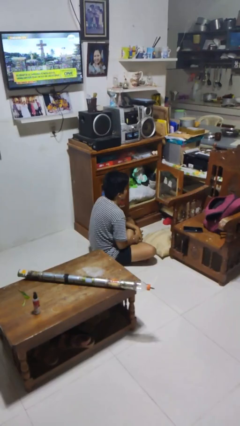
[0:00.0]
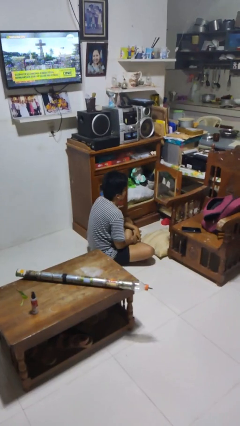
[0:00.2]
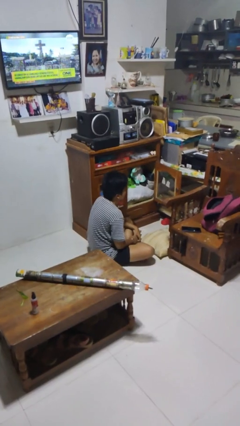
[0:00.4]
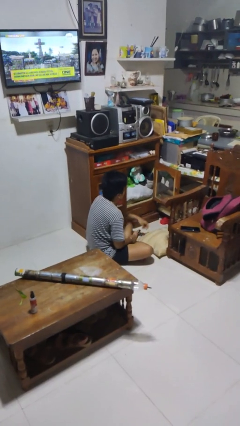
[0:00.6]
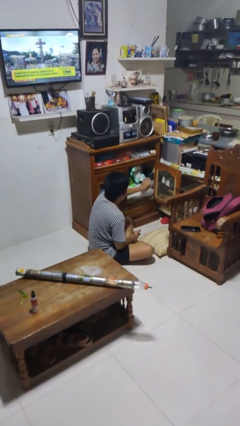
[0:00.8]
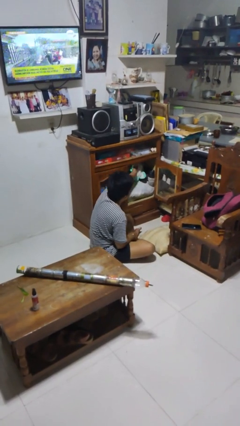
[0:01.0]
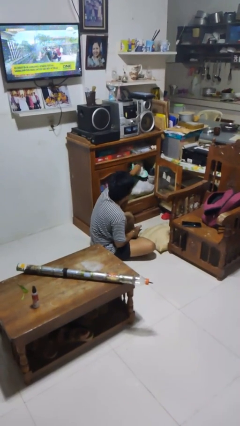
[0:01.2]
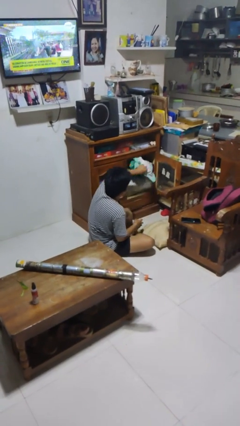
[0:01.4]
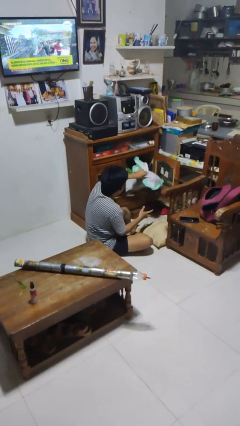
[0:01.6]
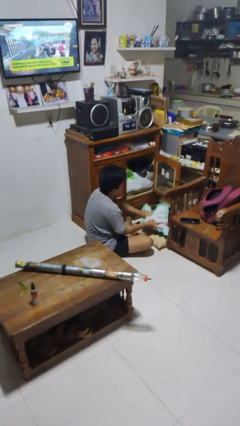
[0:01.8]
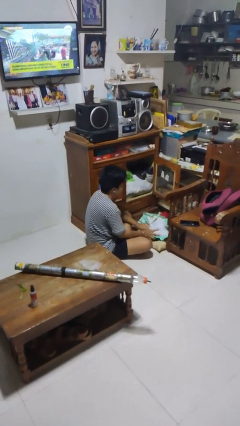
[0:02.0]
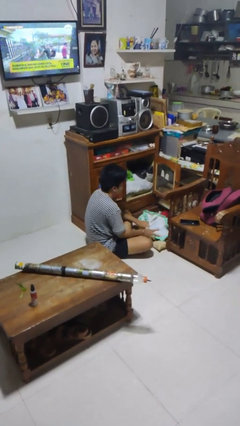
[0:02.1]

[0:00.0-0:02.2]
person puts clothes into dresser

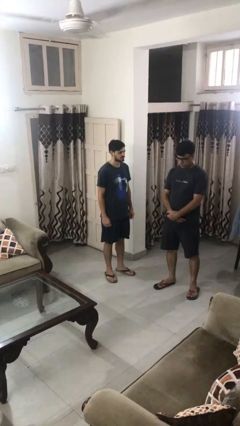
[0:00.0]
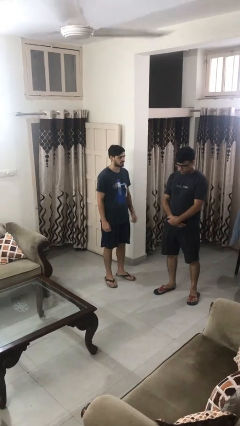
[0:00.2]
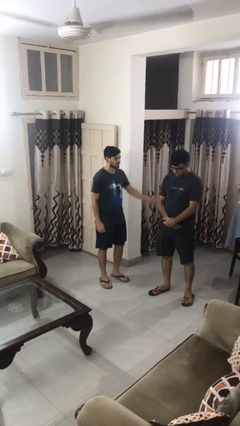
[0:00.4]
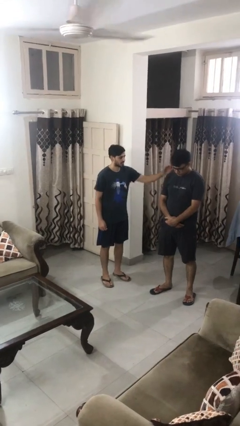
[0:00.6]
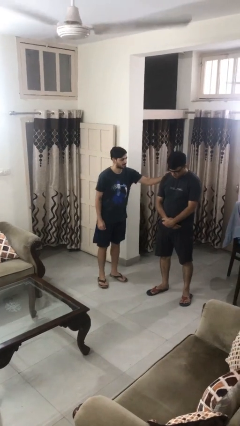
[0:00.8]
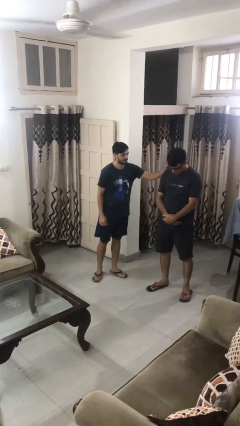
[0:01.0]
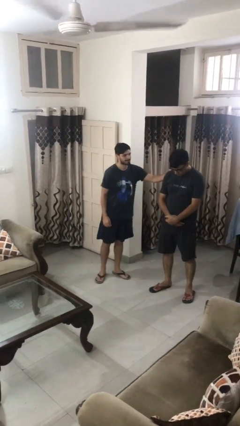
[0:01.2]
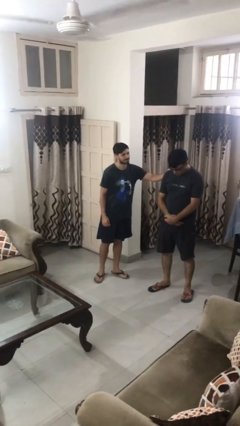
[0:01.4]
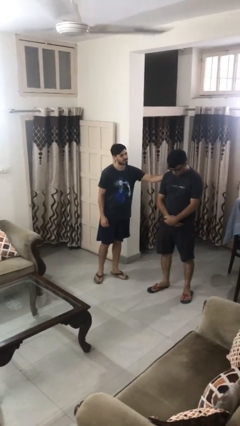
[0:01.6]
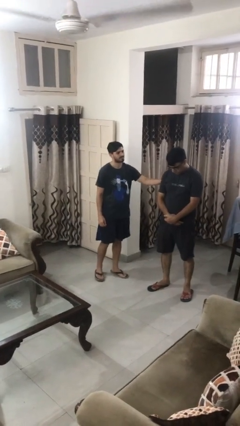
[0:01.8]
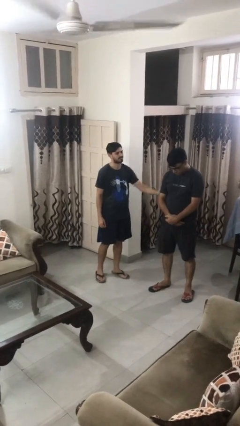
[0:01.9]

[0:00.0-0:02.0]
person pounds shoulders of person

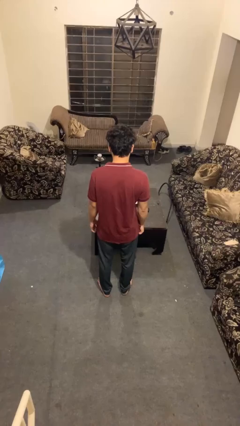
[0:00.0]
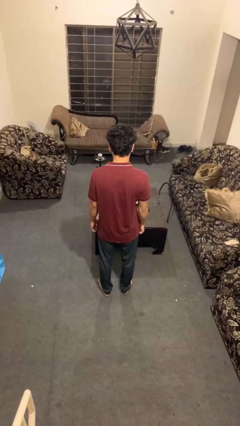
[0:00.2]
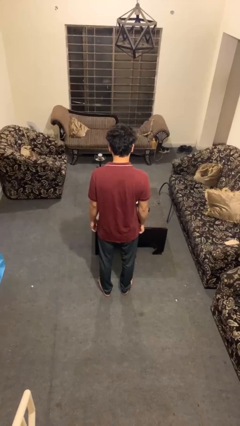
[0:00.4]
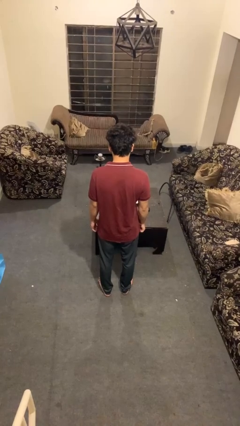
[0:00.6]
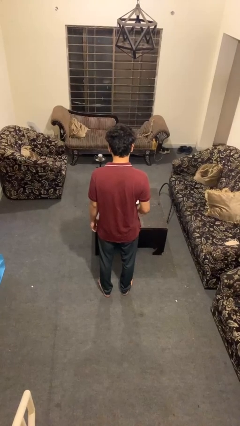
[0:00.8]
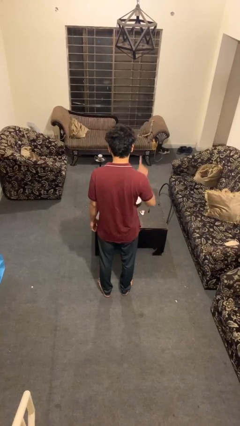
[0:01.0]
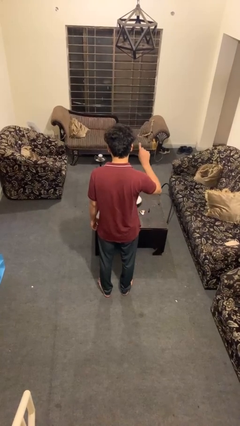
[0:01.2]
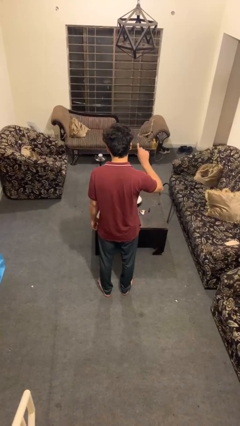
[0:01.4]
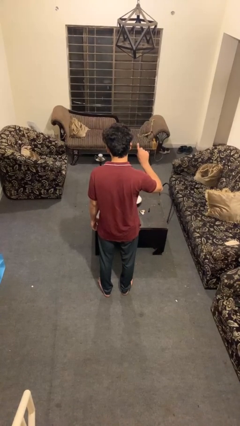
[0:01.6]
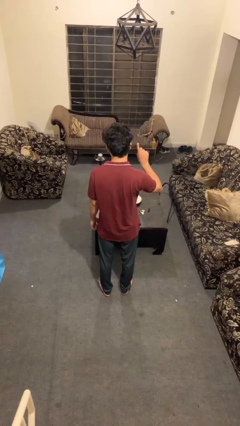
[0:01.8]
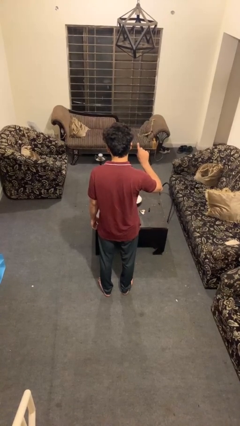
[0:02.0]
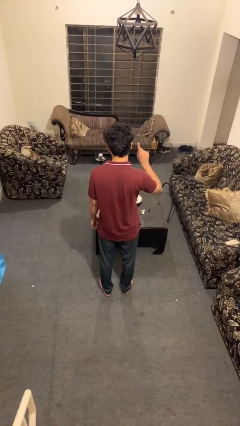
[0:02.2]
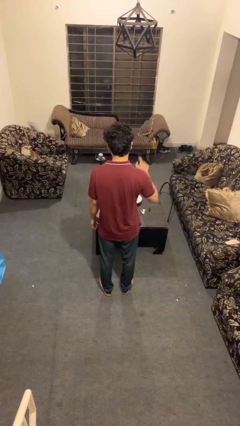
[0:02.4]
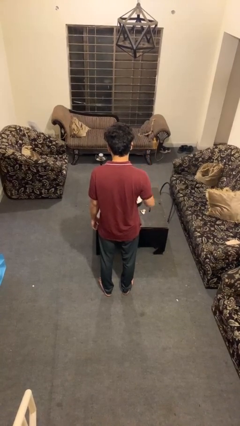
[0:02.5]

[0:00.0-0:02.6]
person gestures number one

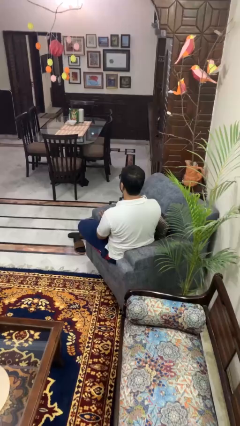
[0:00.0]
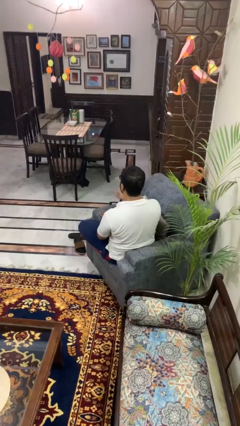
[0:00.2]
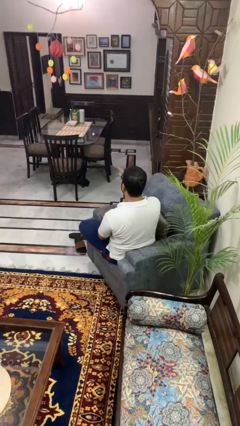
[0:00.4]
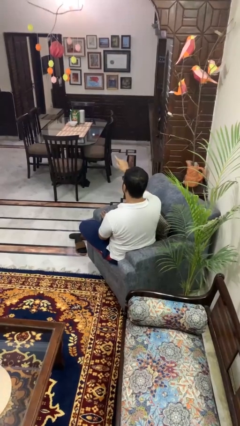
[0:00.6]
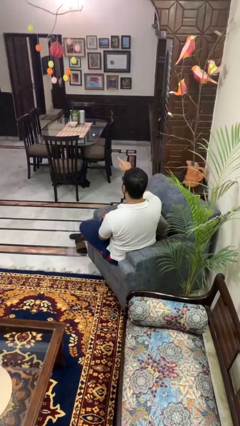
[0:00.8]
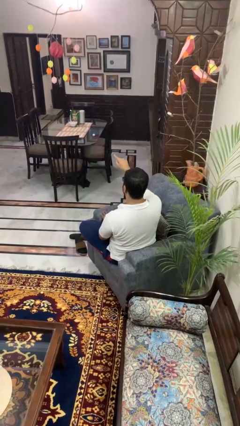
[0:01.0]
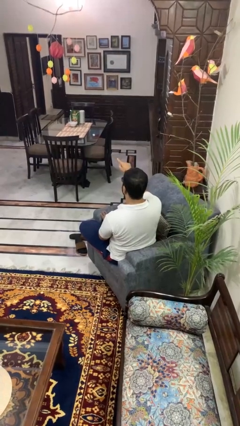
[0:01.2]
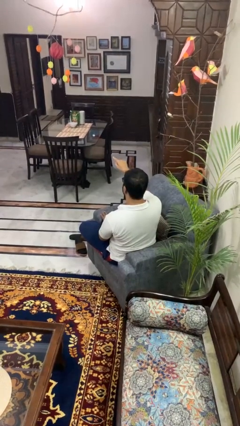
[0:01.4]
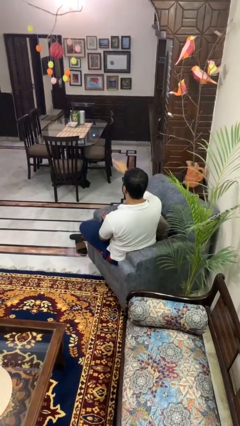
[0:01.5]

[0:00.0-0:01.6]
person points at person

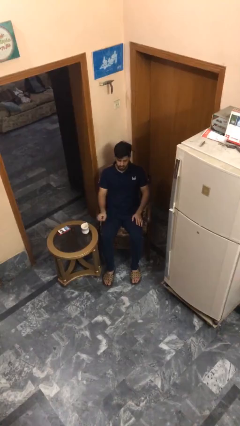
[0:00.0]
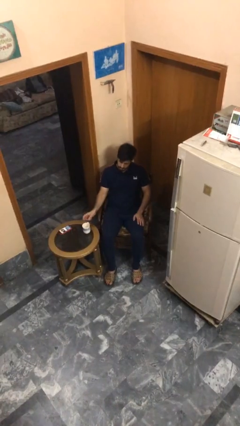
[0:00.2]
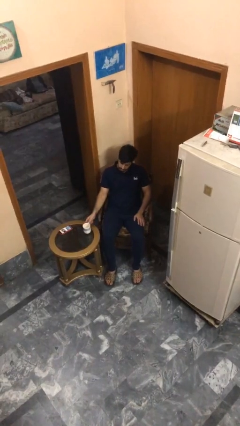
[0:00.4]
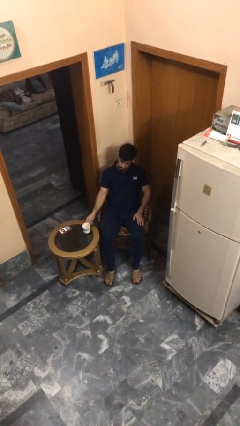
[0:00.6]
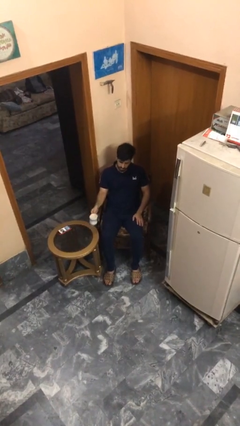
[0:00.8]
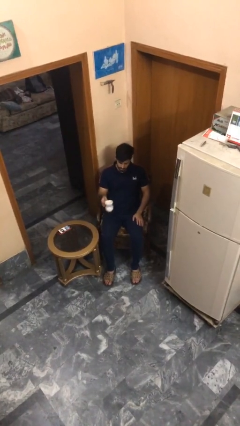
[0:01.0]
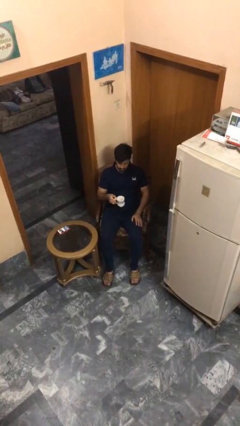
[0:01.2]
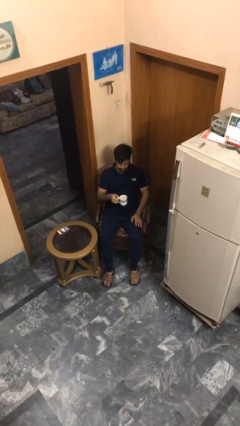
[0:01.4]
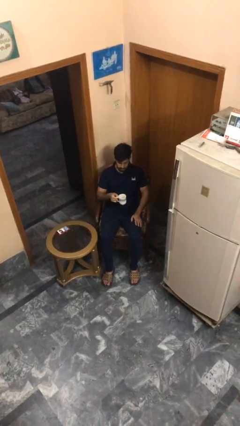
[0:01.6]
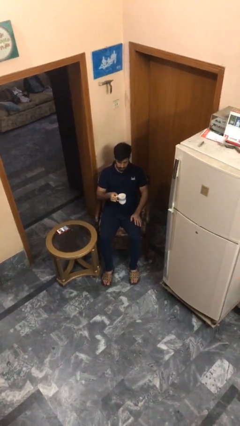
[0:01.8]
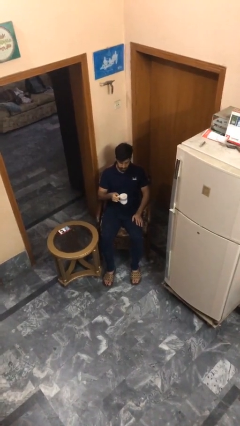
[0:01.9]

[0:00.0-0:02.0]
person picks up object from table

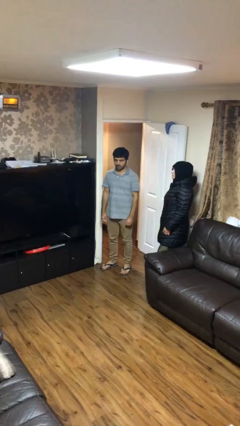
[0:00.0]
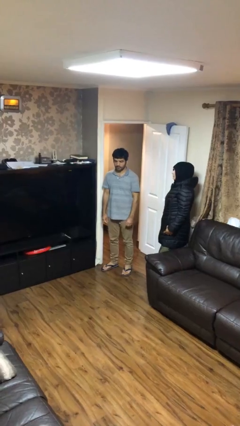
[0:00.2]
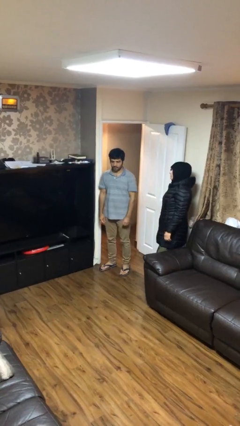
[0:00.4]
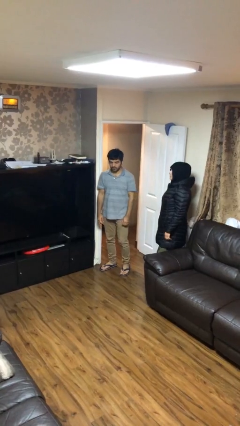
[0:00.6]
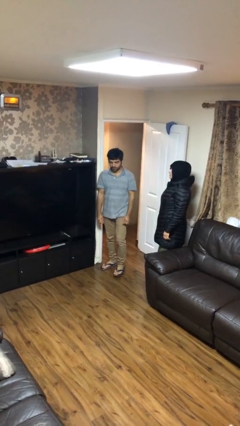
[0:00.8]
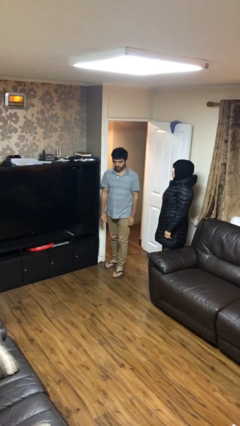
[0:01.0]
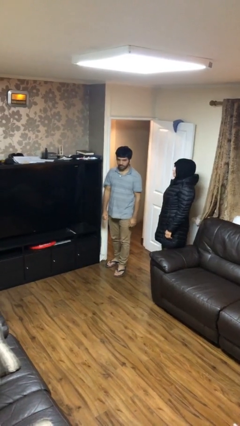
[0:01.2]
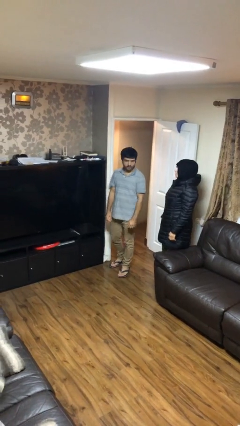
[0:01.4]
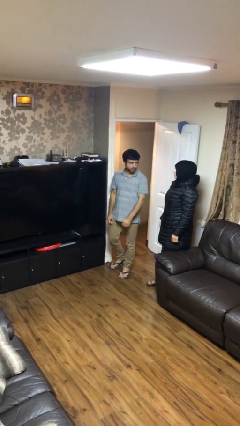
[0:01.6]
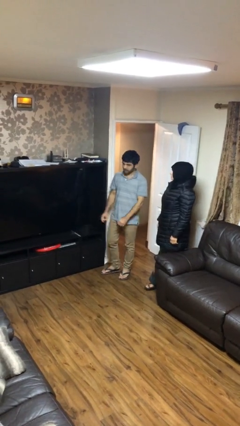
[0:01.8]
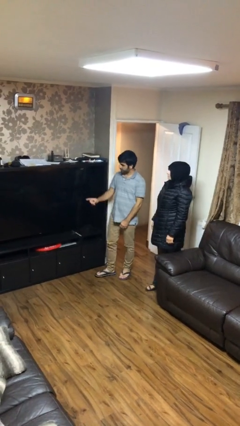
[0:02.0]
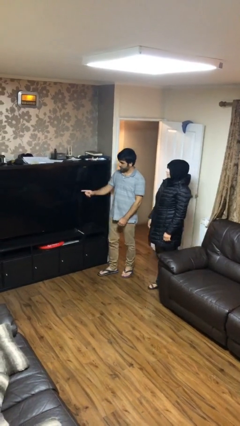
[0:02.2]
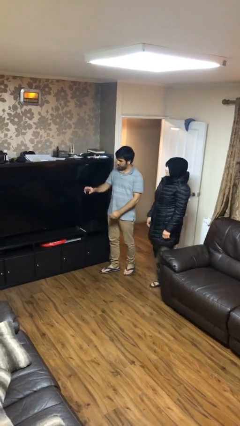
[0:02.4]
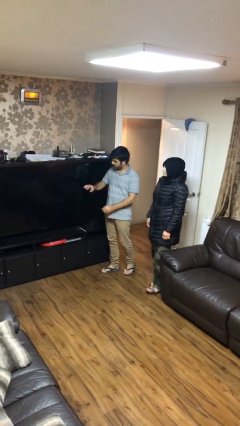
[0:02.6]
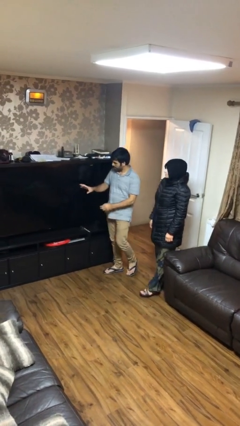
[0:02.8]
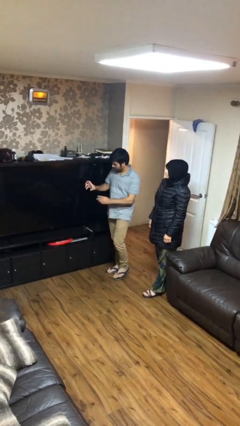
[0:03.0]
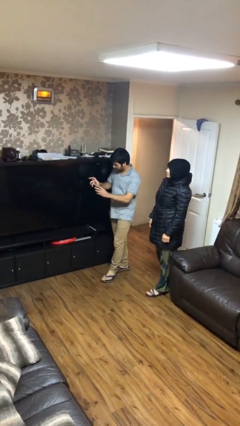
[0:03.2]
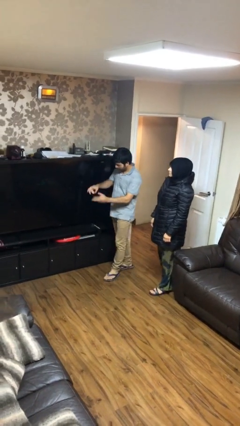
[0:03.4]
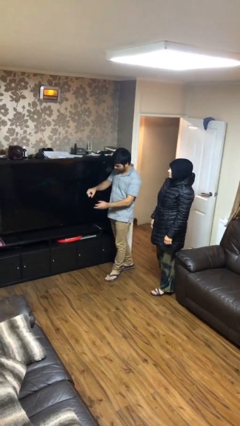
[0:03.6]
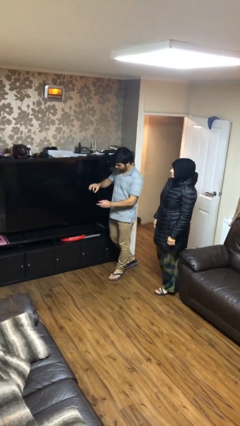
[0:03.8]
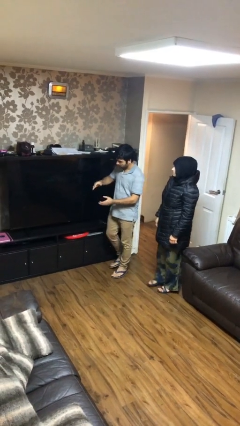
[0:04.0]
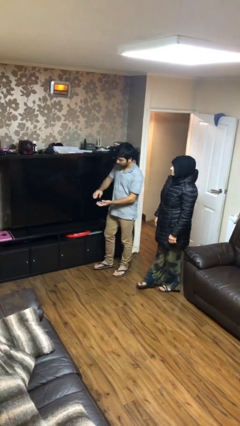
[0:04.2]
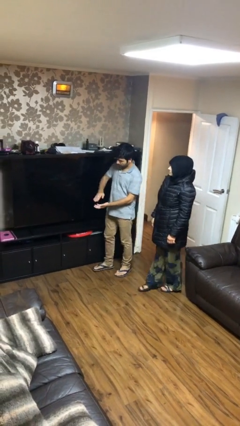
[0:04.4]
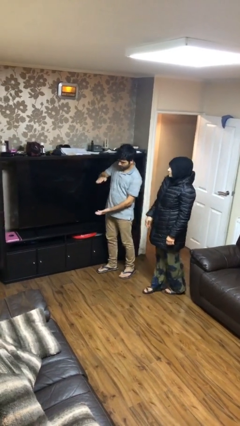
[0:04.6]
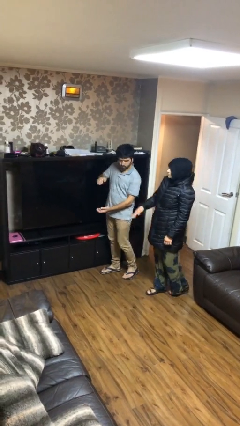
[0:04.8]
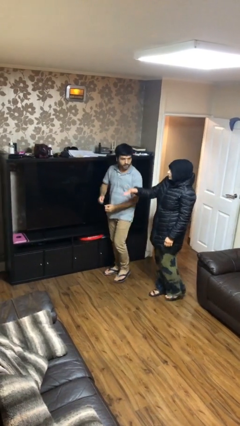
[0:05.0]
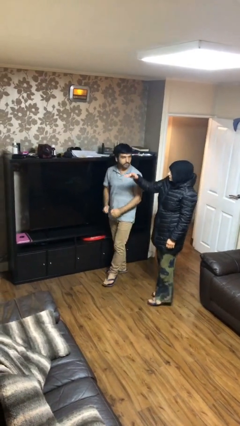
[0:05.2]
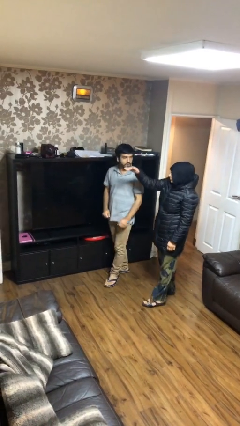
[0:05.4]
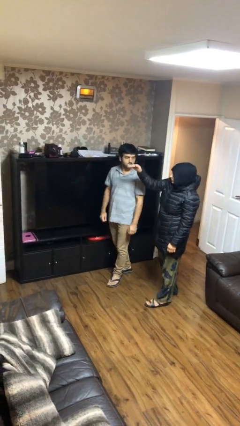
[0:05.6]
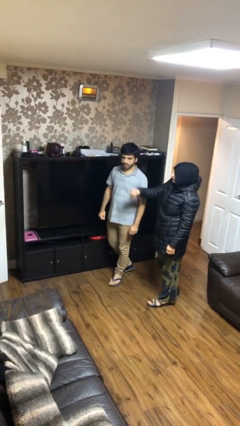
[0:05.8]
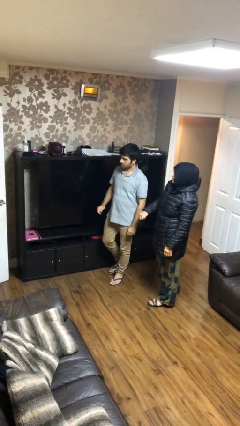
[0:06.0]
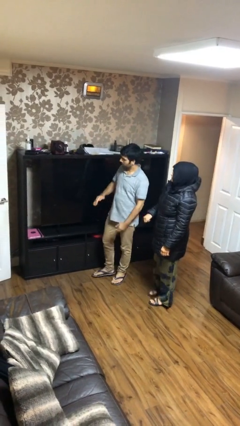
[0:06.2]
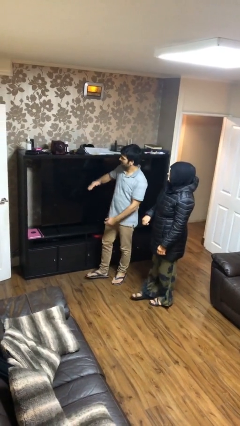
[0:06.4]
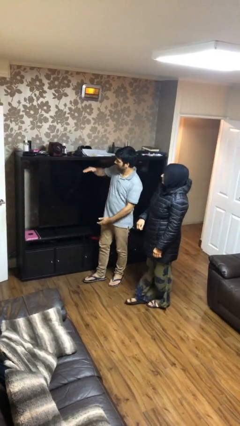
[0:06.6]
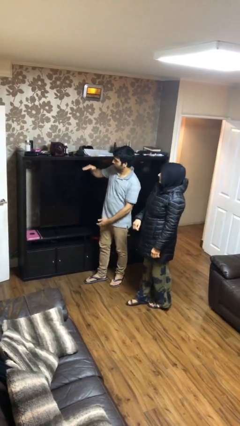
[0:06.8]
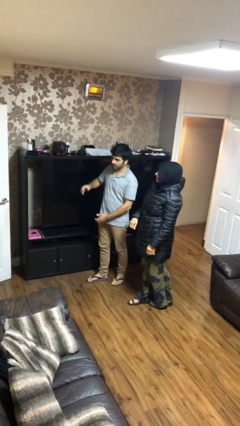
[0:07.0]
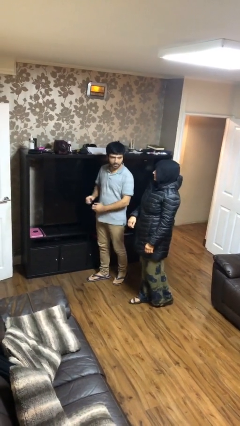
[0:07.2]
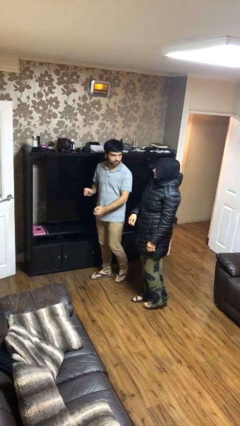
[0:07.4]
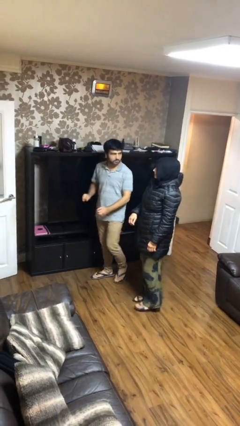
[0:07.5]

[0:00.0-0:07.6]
person talks to person
